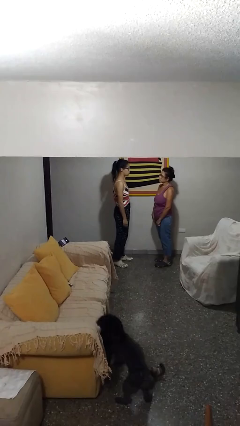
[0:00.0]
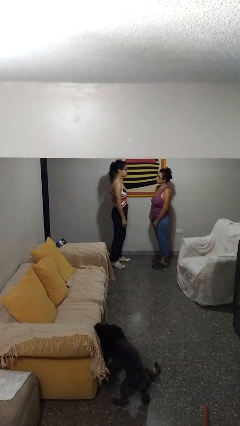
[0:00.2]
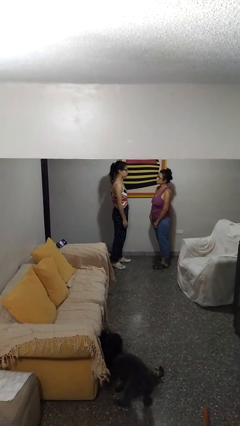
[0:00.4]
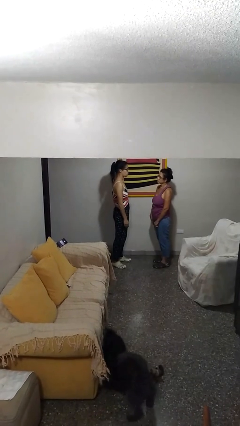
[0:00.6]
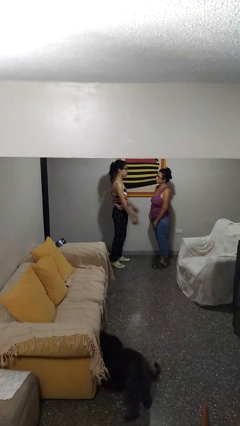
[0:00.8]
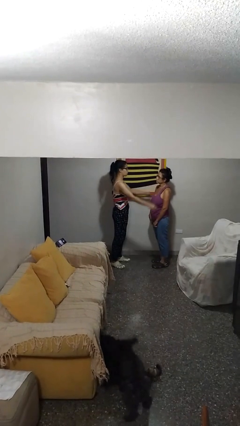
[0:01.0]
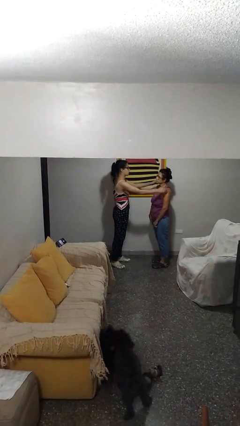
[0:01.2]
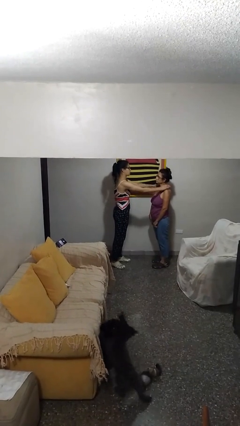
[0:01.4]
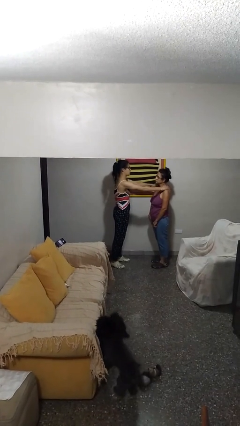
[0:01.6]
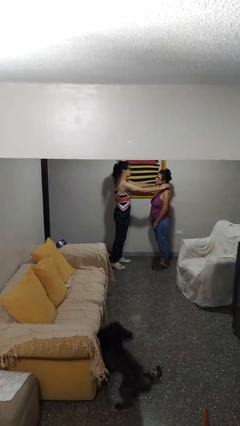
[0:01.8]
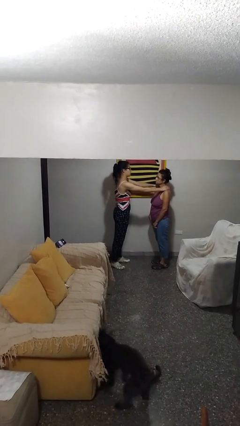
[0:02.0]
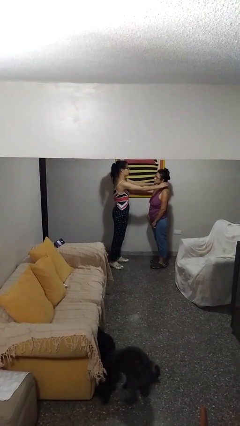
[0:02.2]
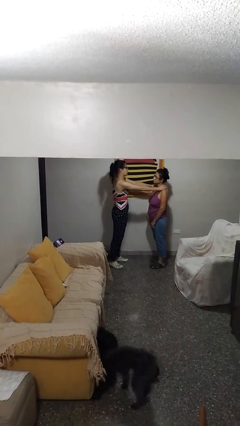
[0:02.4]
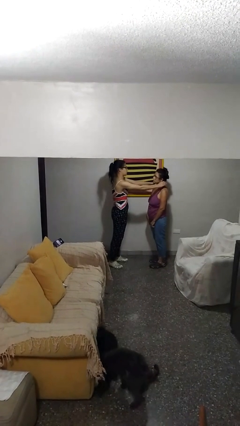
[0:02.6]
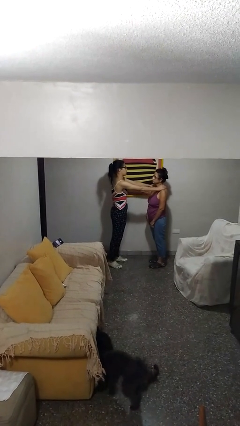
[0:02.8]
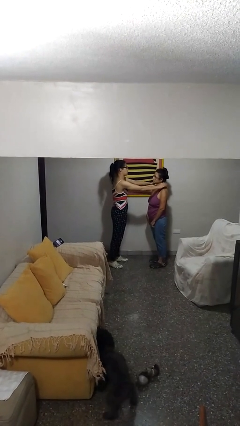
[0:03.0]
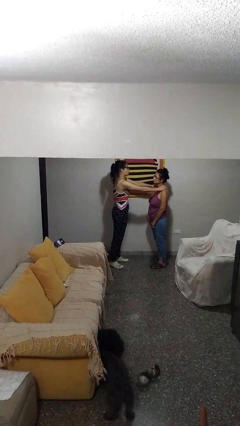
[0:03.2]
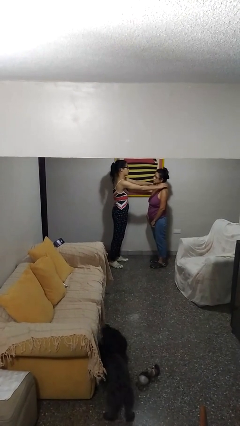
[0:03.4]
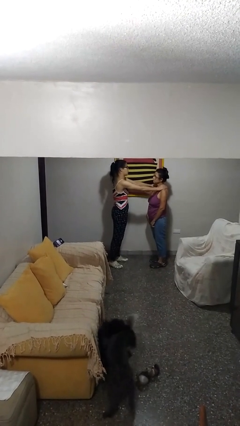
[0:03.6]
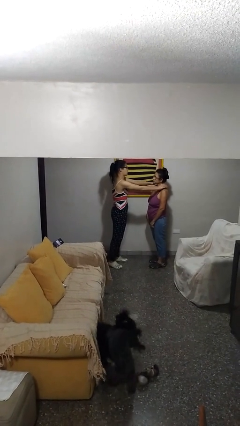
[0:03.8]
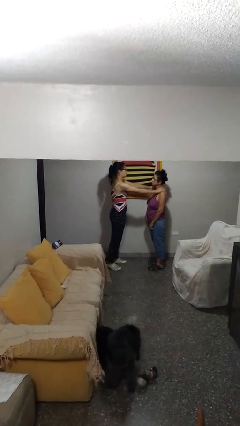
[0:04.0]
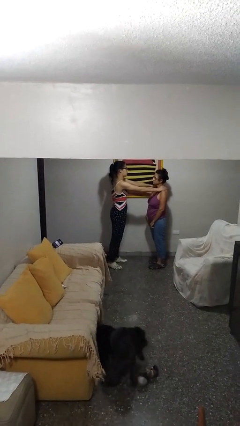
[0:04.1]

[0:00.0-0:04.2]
person pounds shoulders of person

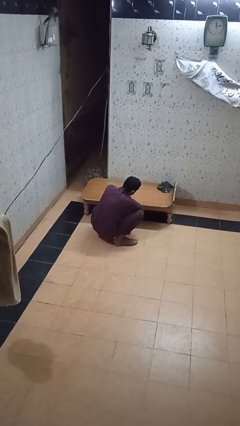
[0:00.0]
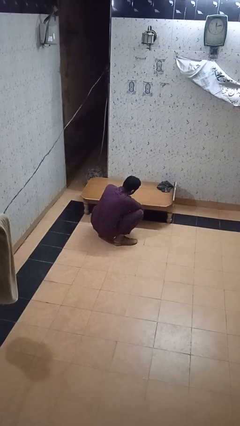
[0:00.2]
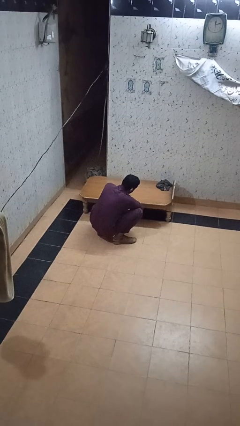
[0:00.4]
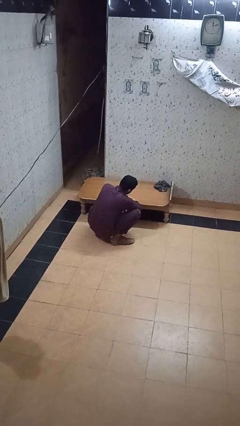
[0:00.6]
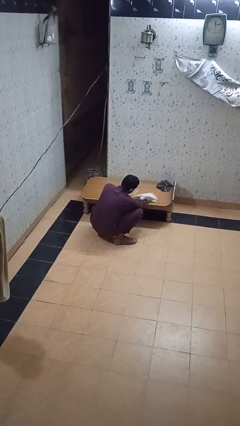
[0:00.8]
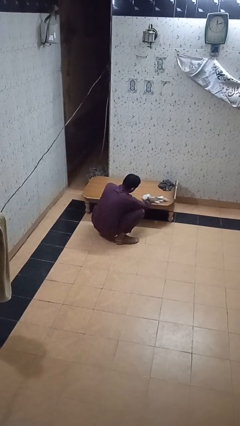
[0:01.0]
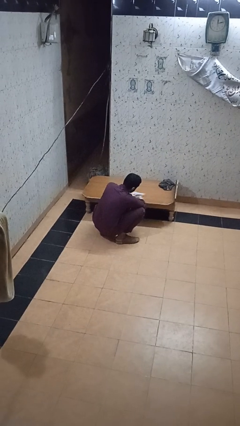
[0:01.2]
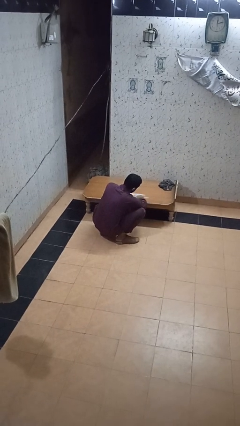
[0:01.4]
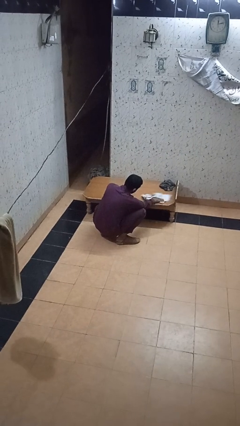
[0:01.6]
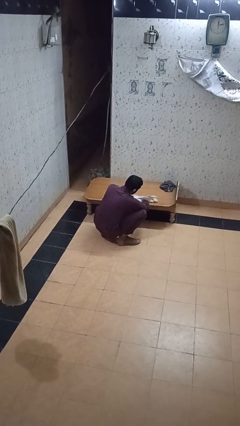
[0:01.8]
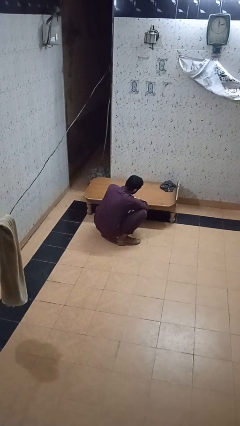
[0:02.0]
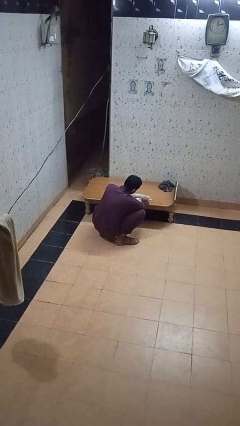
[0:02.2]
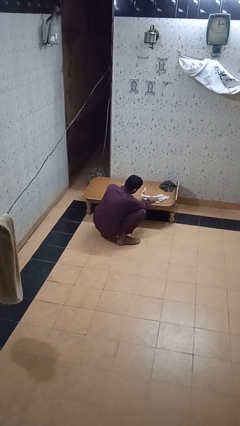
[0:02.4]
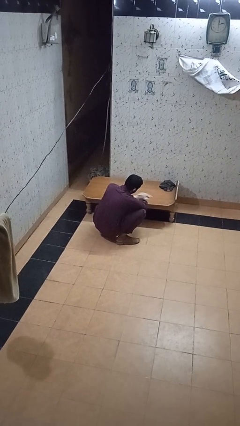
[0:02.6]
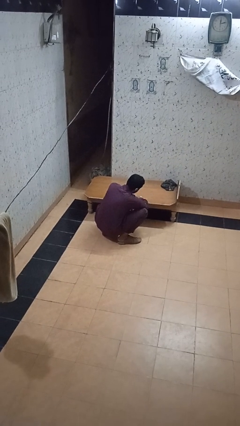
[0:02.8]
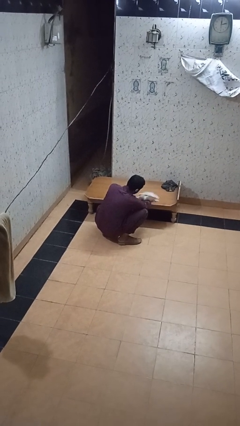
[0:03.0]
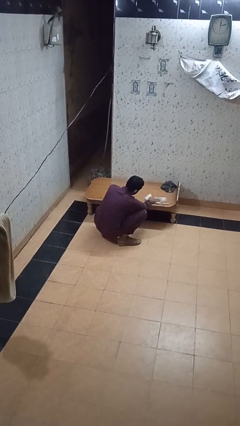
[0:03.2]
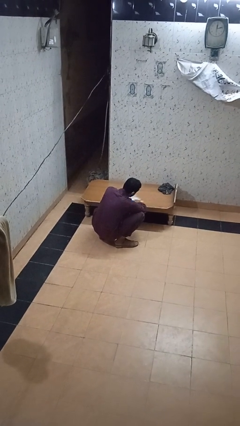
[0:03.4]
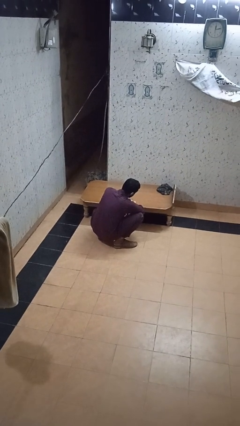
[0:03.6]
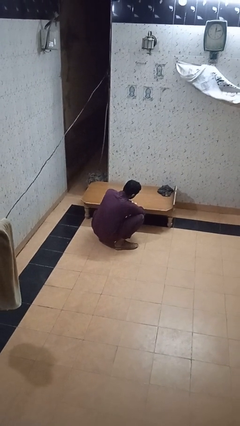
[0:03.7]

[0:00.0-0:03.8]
person vacuums carpet

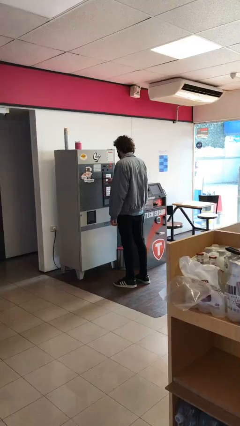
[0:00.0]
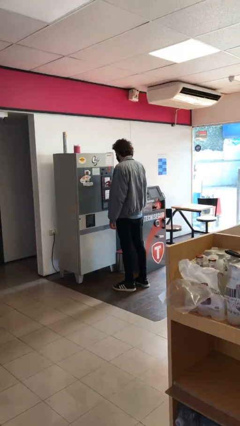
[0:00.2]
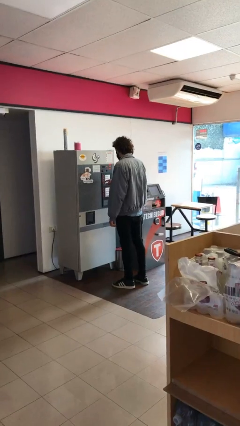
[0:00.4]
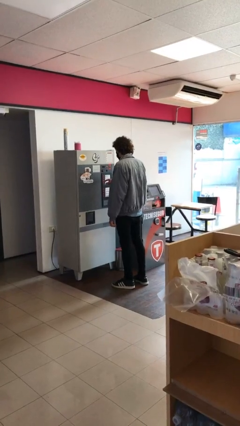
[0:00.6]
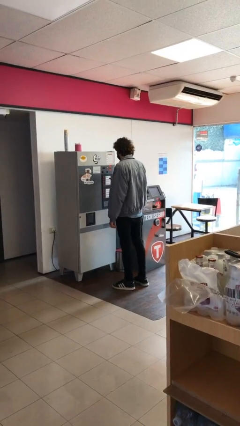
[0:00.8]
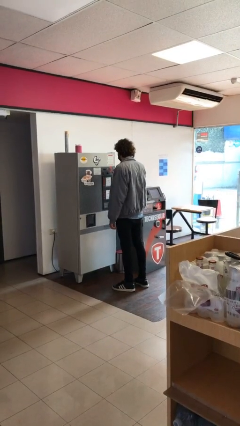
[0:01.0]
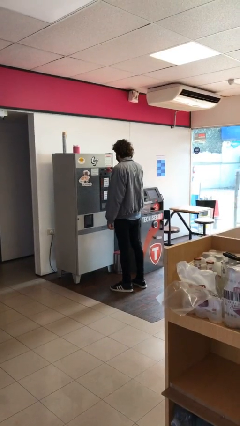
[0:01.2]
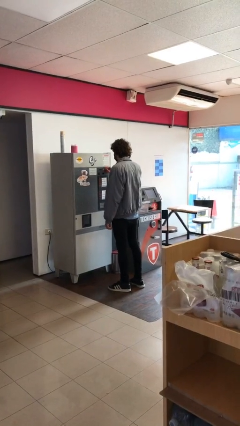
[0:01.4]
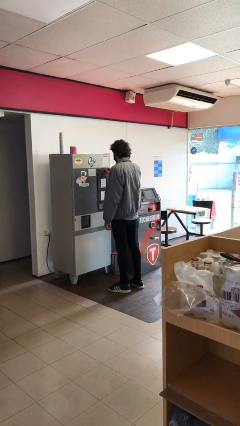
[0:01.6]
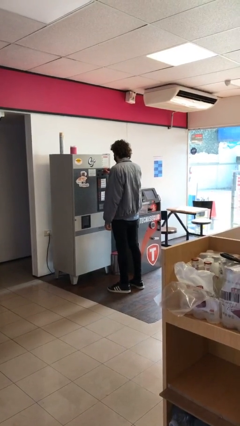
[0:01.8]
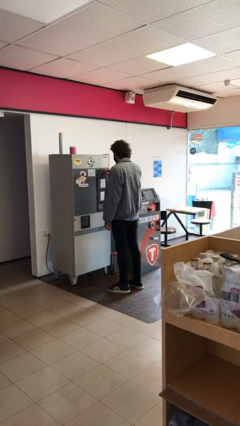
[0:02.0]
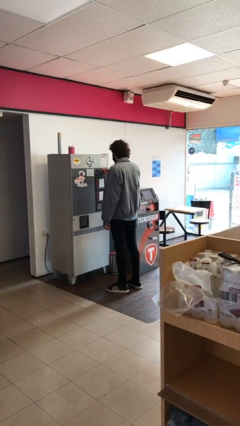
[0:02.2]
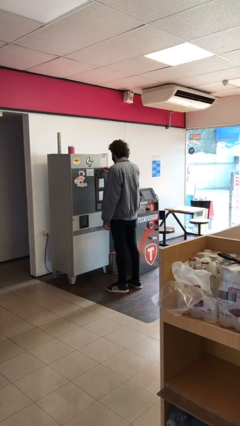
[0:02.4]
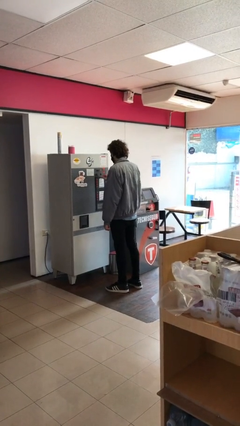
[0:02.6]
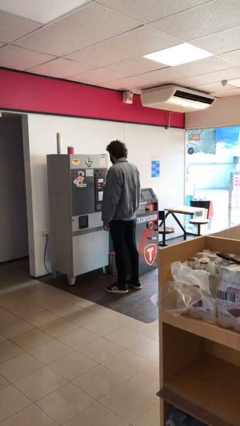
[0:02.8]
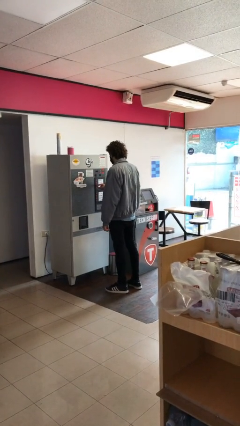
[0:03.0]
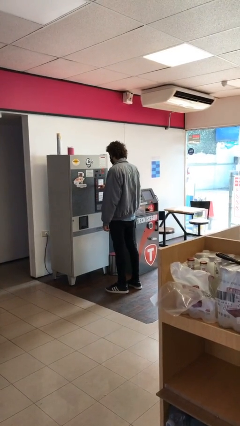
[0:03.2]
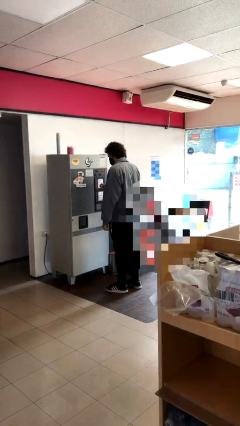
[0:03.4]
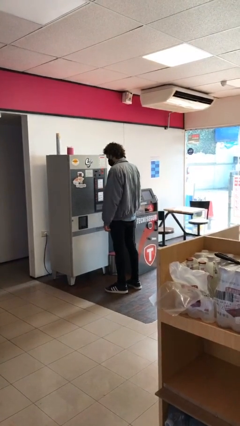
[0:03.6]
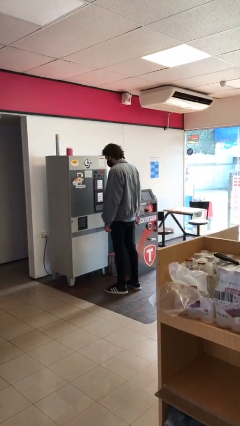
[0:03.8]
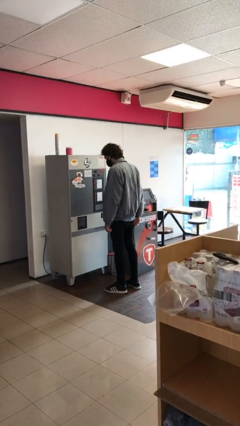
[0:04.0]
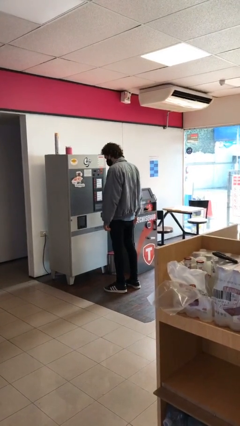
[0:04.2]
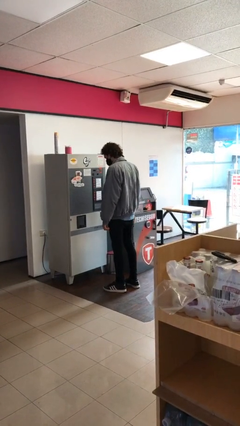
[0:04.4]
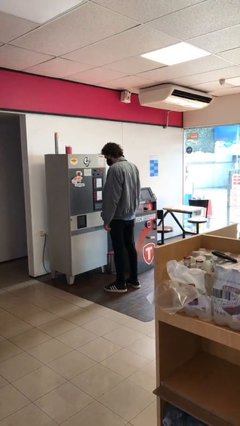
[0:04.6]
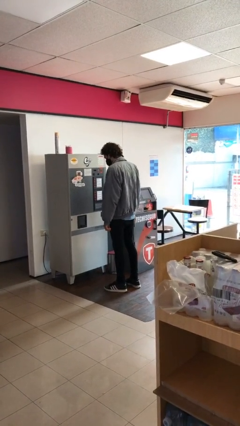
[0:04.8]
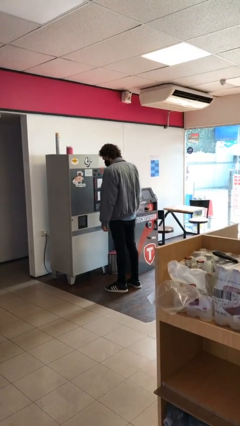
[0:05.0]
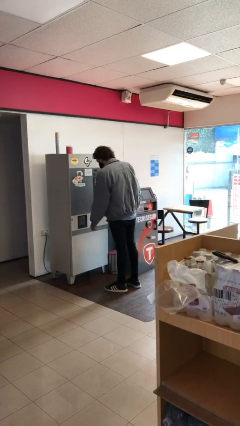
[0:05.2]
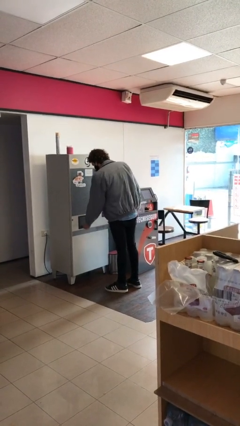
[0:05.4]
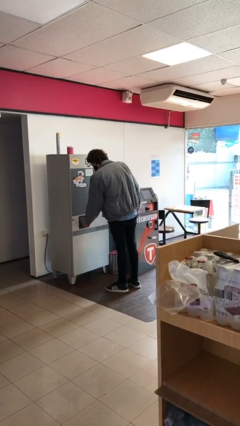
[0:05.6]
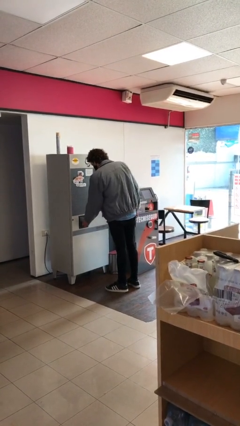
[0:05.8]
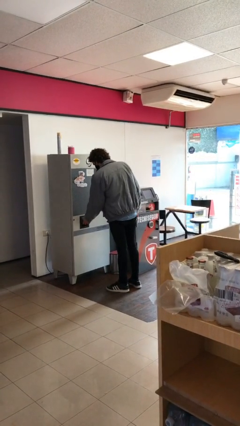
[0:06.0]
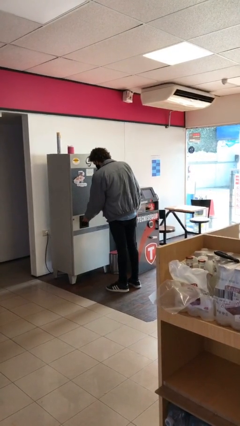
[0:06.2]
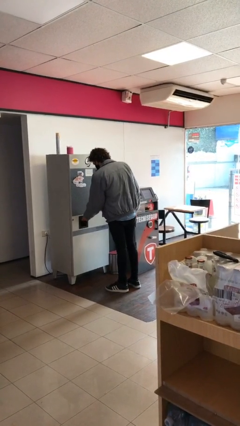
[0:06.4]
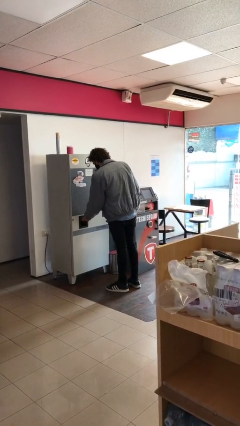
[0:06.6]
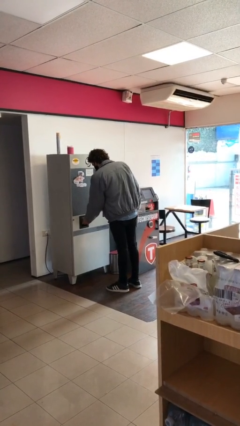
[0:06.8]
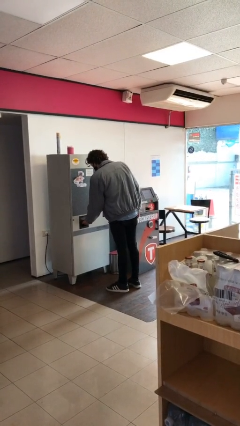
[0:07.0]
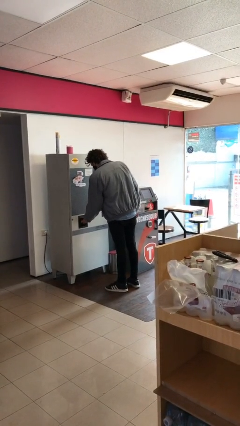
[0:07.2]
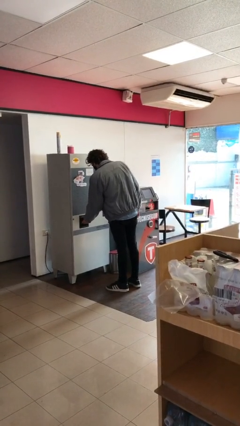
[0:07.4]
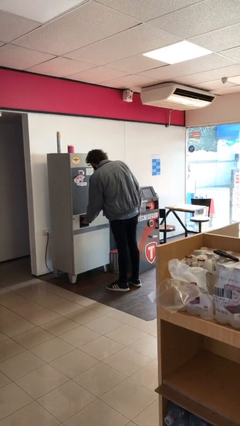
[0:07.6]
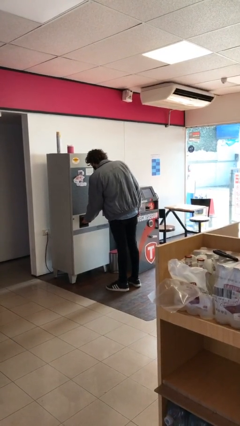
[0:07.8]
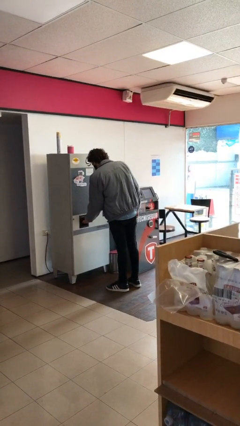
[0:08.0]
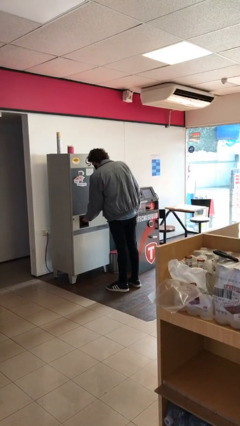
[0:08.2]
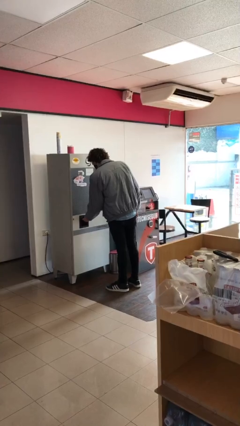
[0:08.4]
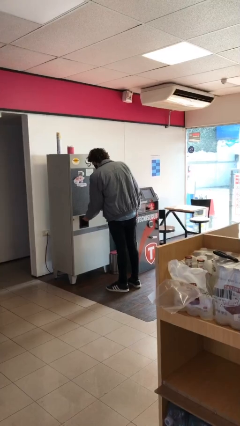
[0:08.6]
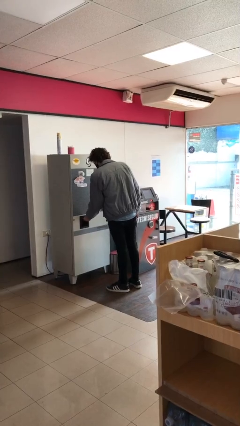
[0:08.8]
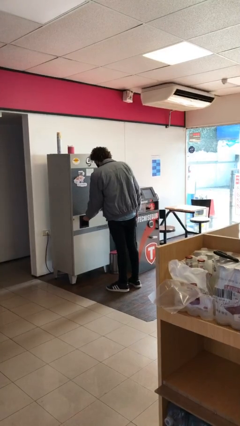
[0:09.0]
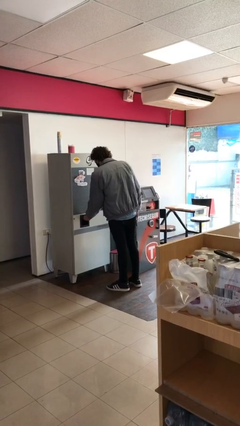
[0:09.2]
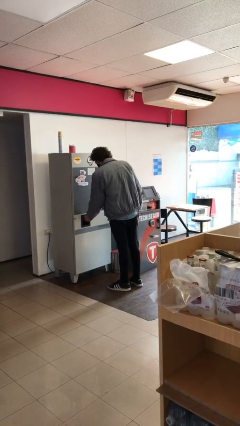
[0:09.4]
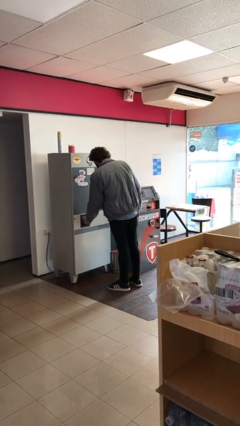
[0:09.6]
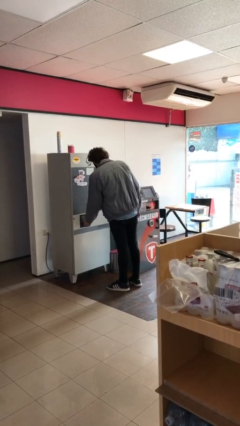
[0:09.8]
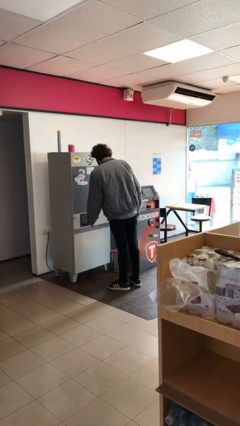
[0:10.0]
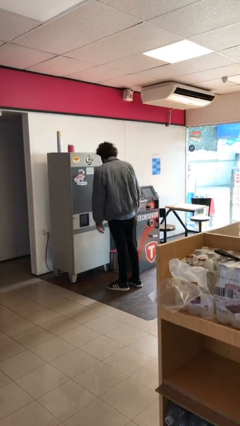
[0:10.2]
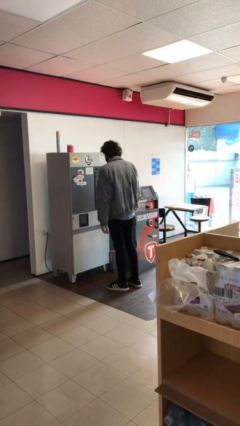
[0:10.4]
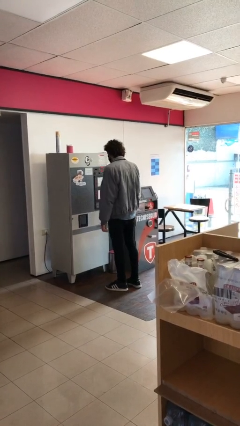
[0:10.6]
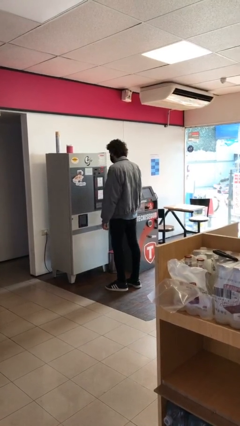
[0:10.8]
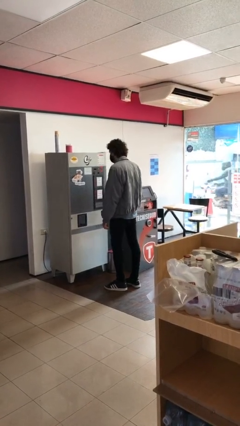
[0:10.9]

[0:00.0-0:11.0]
person purchases from machine
